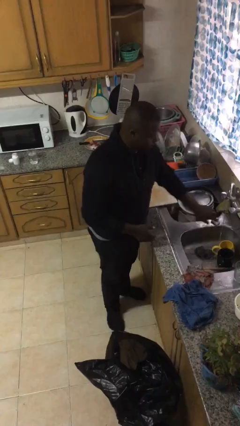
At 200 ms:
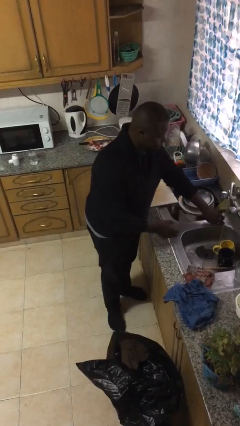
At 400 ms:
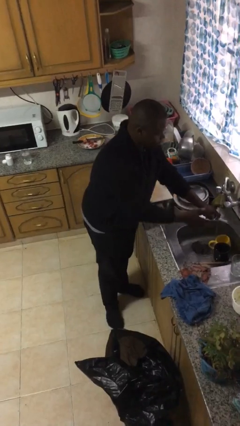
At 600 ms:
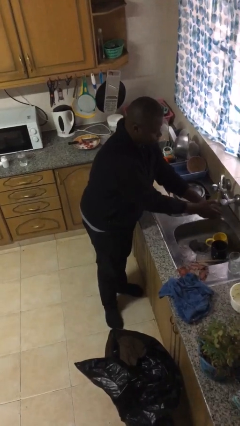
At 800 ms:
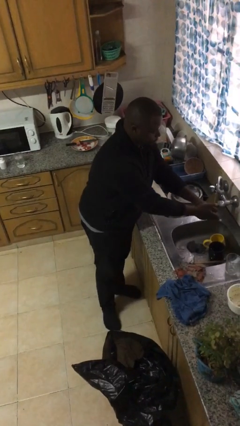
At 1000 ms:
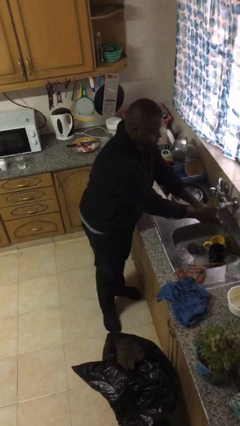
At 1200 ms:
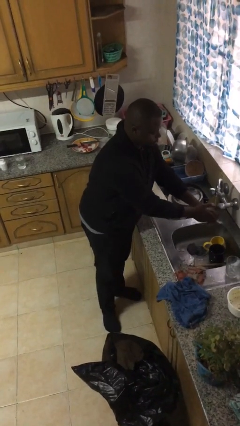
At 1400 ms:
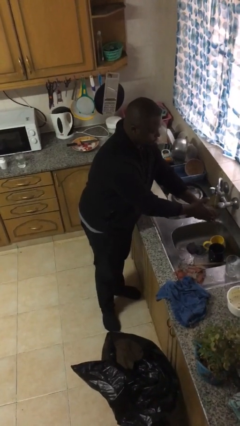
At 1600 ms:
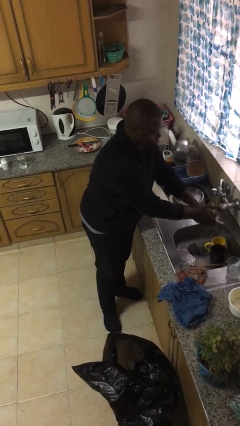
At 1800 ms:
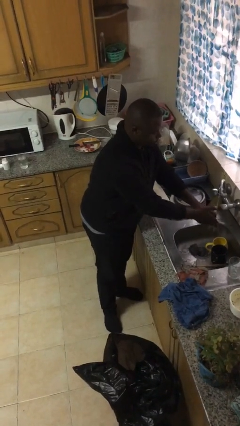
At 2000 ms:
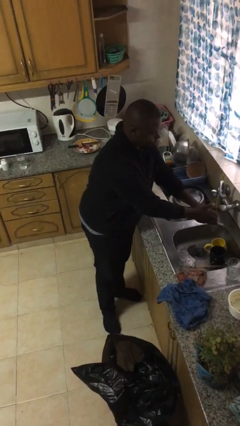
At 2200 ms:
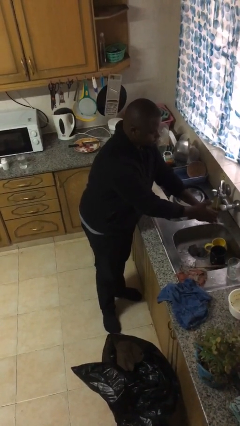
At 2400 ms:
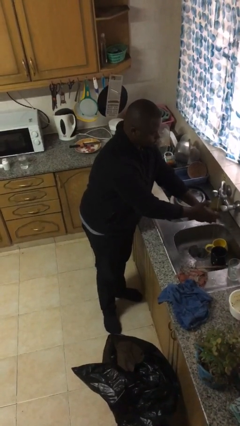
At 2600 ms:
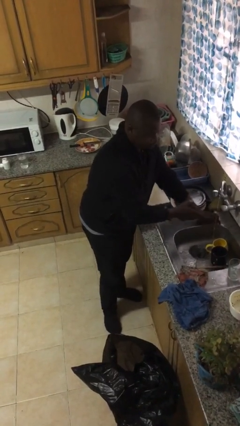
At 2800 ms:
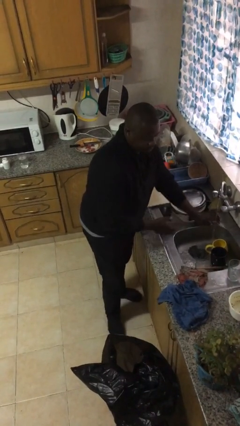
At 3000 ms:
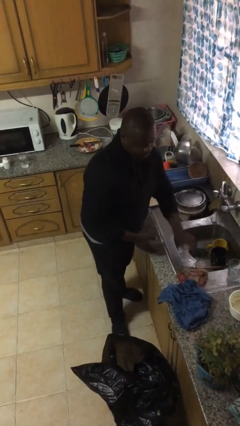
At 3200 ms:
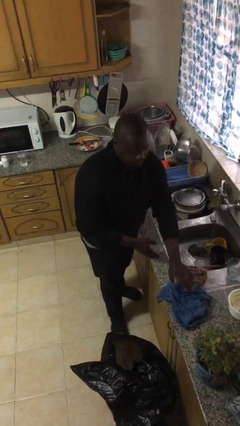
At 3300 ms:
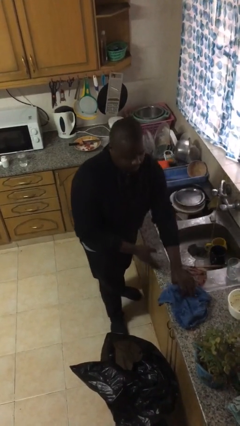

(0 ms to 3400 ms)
person washes hands

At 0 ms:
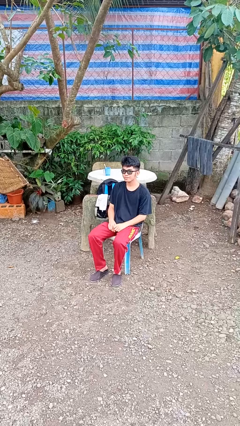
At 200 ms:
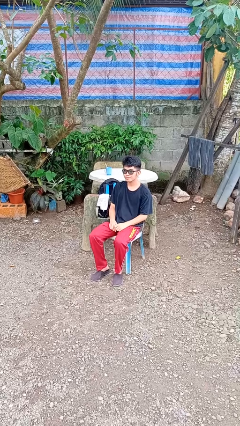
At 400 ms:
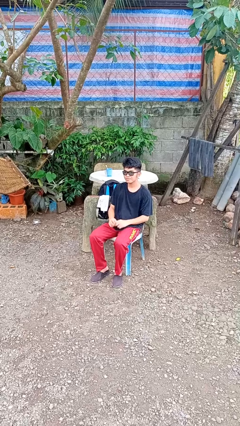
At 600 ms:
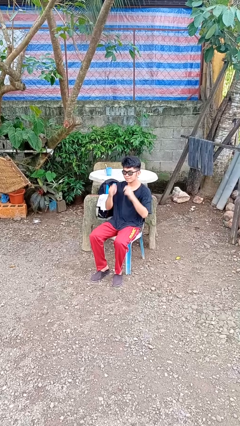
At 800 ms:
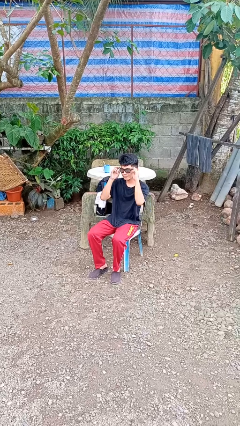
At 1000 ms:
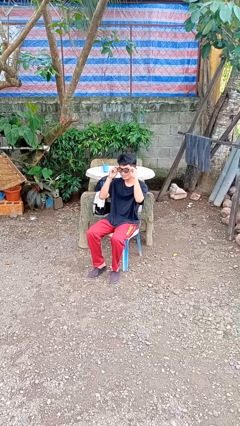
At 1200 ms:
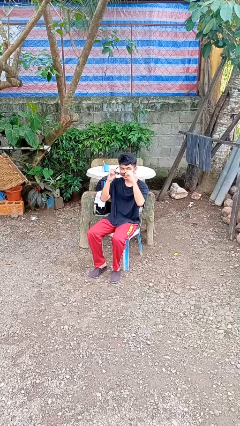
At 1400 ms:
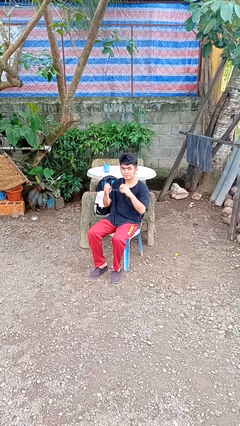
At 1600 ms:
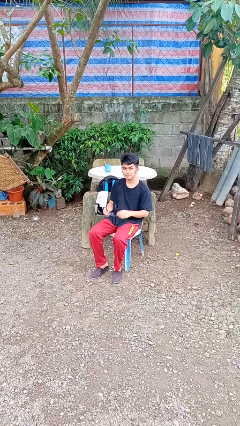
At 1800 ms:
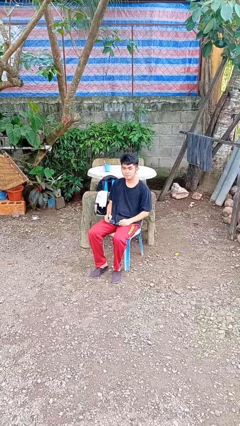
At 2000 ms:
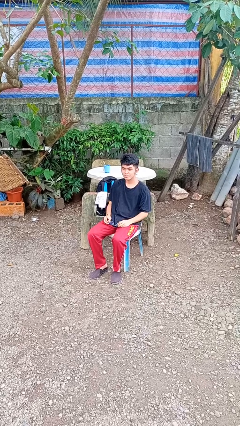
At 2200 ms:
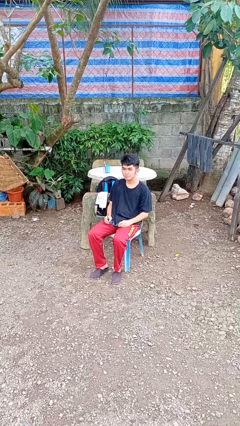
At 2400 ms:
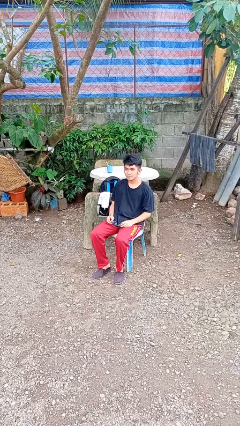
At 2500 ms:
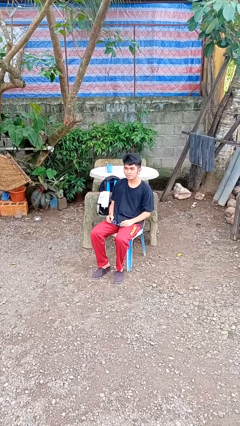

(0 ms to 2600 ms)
person takes off sunglasses

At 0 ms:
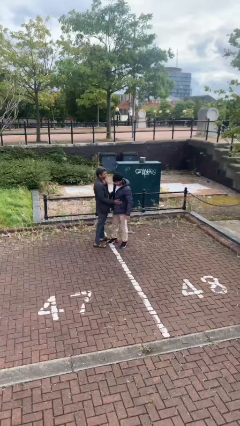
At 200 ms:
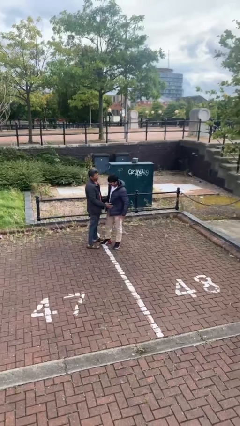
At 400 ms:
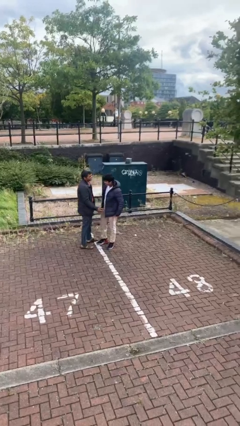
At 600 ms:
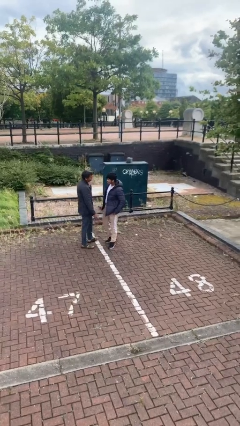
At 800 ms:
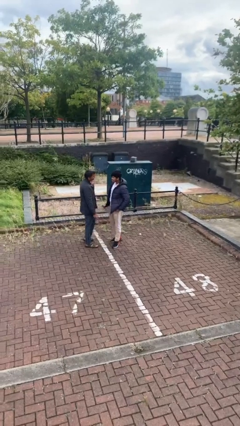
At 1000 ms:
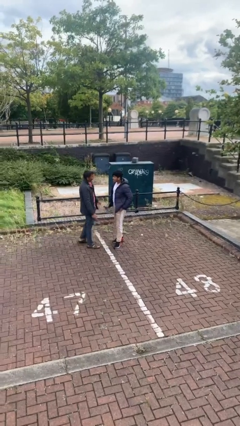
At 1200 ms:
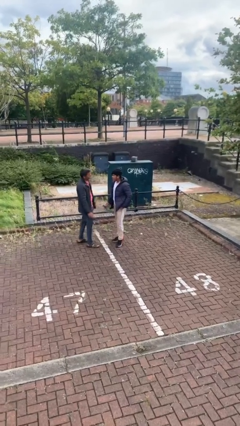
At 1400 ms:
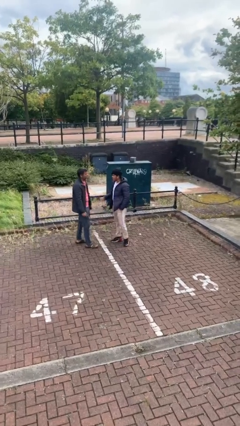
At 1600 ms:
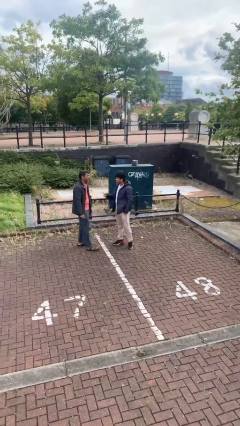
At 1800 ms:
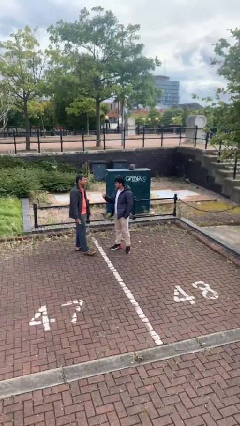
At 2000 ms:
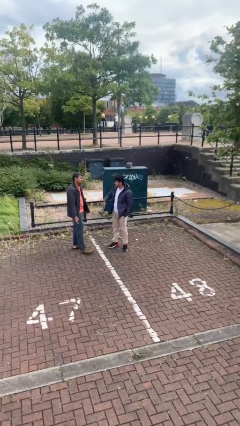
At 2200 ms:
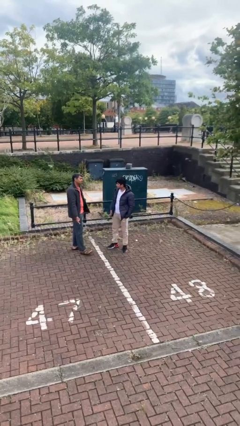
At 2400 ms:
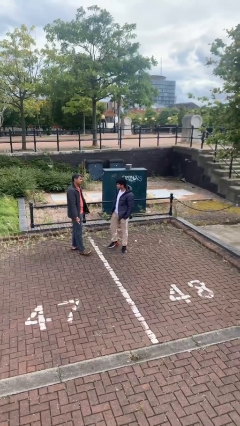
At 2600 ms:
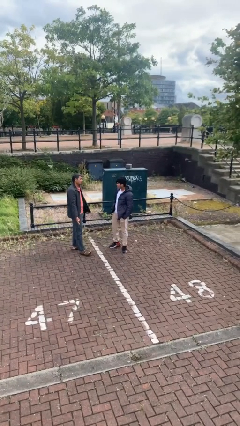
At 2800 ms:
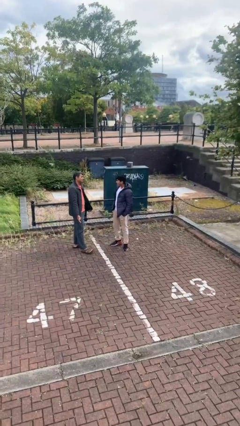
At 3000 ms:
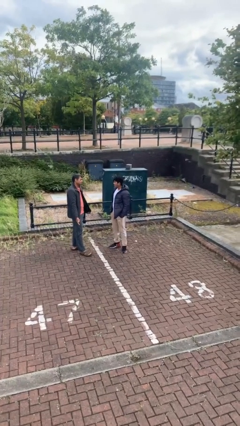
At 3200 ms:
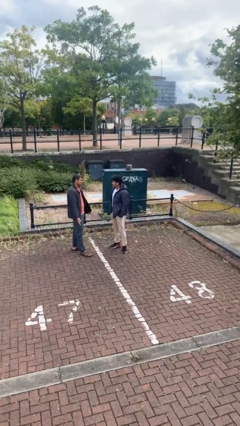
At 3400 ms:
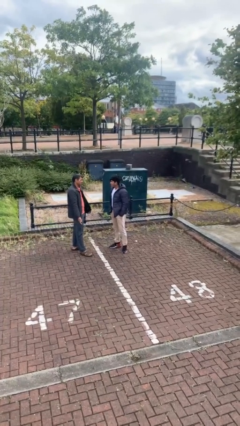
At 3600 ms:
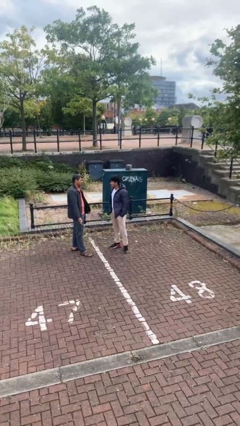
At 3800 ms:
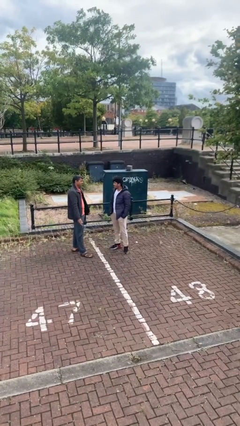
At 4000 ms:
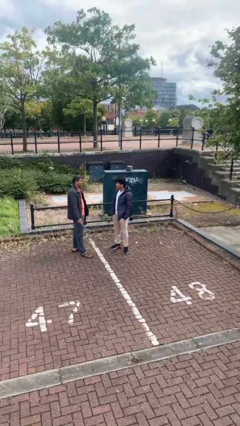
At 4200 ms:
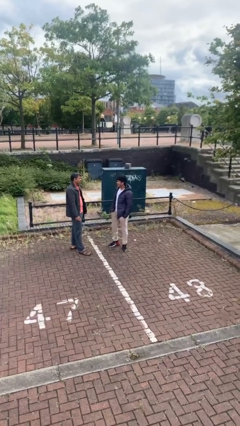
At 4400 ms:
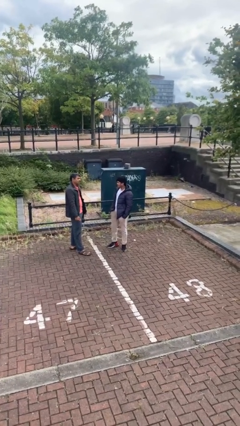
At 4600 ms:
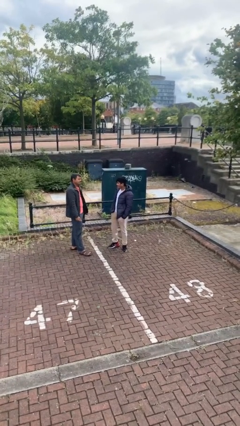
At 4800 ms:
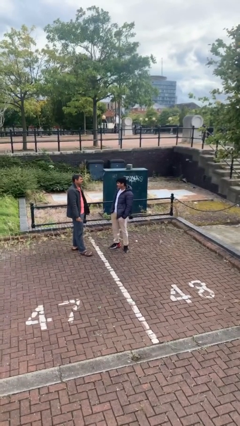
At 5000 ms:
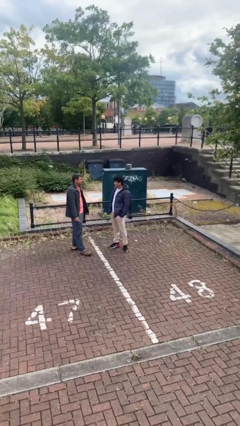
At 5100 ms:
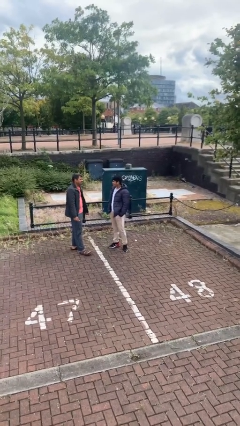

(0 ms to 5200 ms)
person talks to person

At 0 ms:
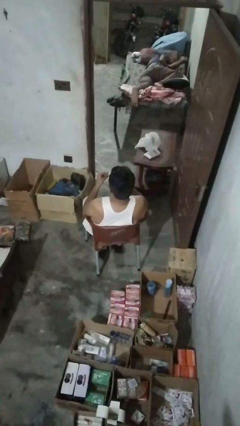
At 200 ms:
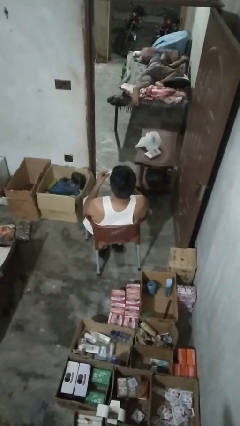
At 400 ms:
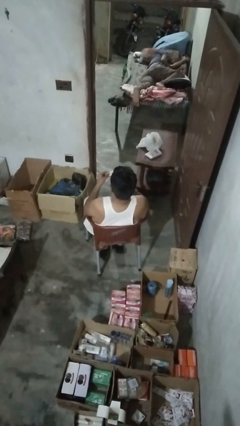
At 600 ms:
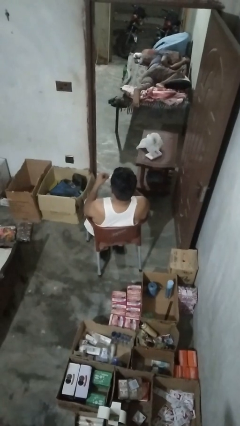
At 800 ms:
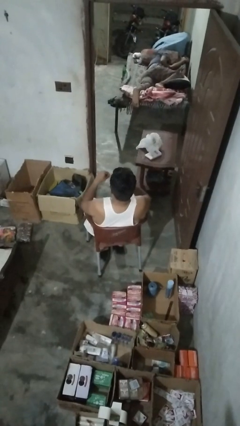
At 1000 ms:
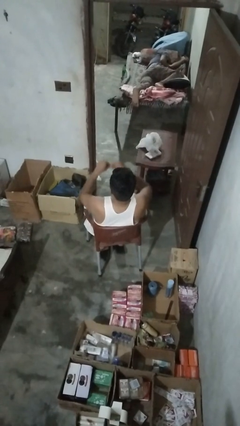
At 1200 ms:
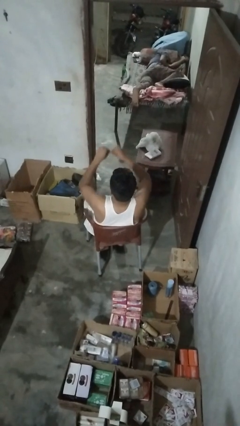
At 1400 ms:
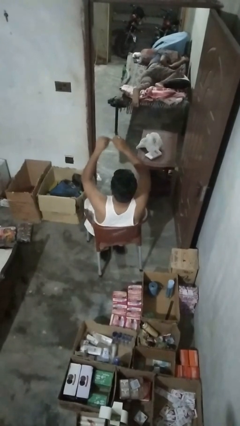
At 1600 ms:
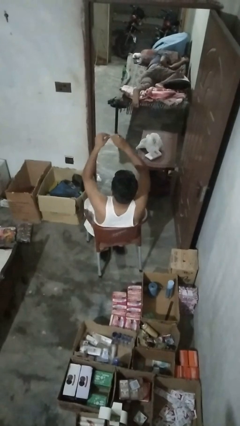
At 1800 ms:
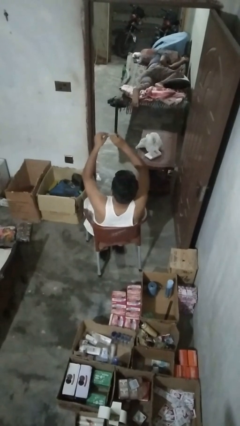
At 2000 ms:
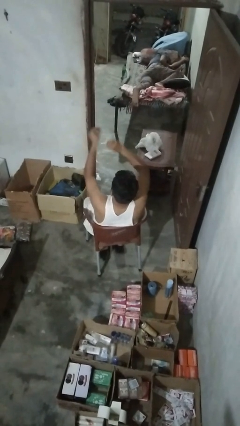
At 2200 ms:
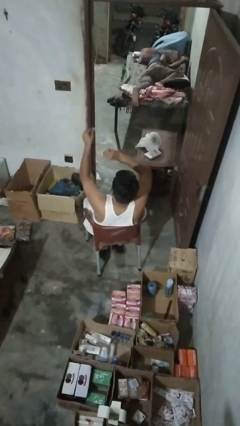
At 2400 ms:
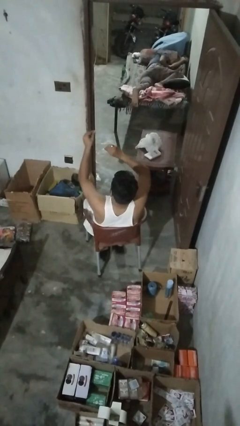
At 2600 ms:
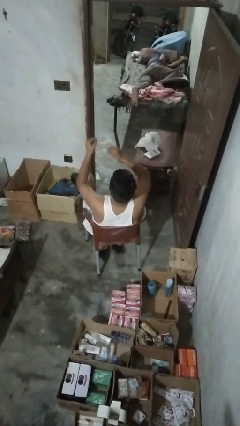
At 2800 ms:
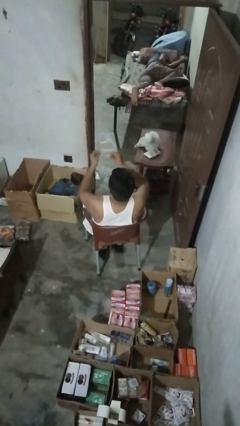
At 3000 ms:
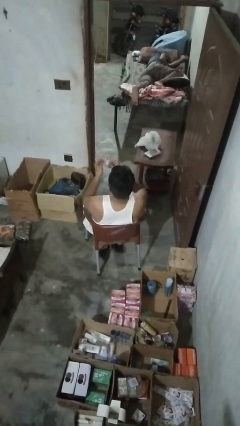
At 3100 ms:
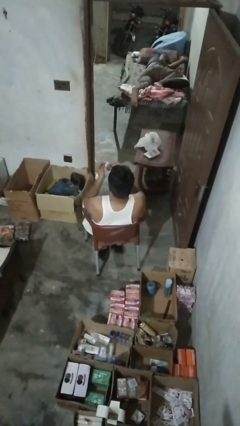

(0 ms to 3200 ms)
person tears paper

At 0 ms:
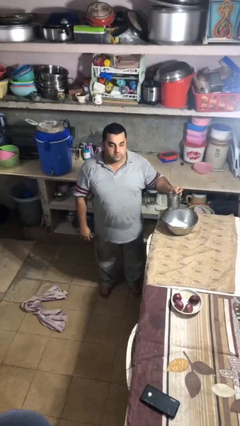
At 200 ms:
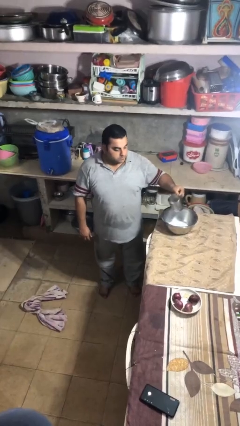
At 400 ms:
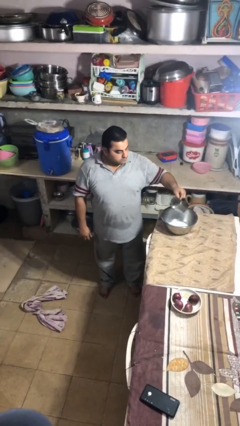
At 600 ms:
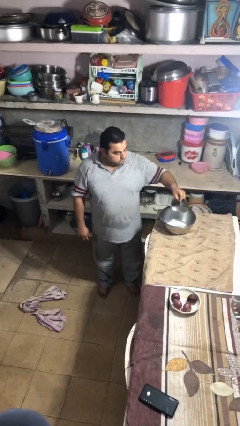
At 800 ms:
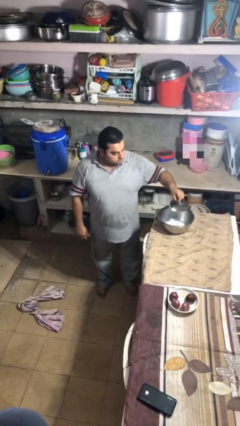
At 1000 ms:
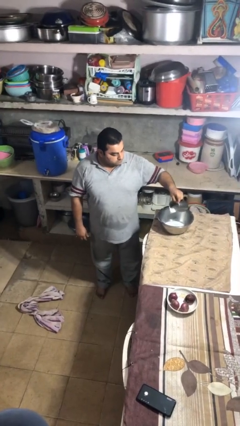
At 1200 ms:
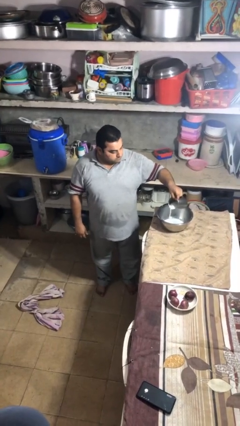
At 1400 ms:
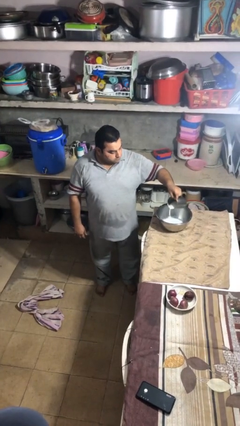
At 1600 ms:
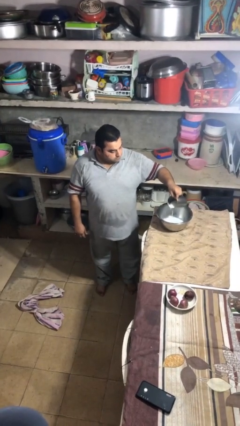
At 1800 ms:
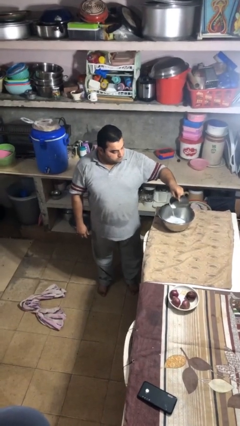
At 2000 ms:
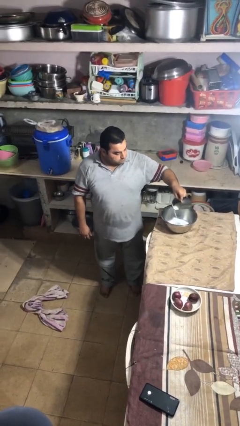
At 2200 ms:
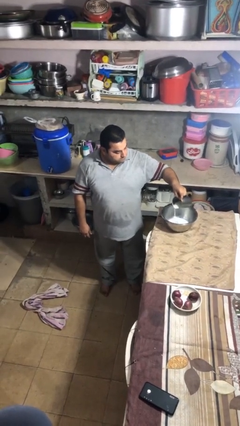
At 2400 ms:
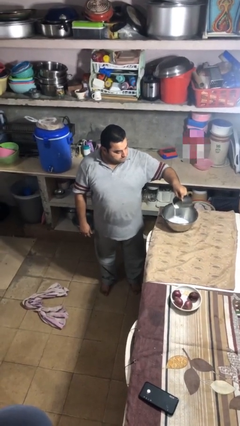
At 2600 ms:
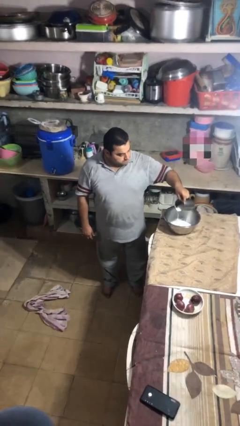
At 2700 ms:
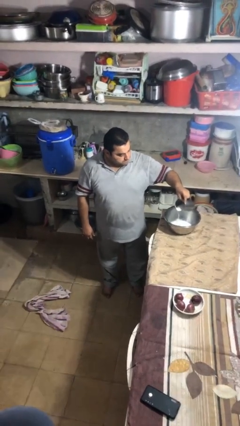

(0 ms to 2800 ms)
person pours into bowl

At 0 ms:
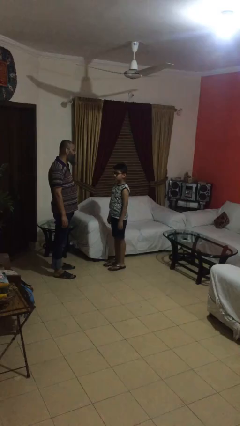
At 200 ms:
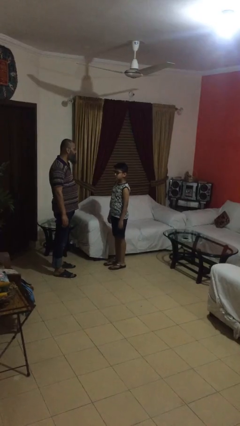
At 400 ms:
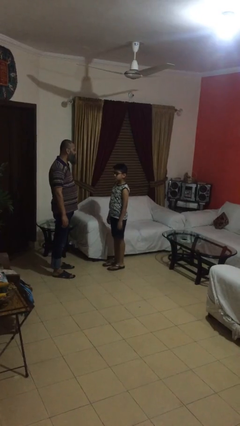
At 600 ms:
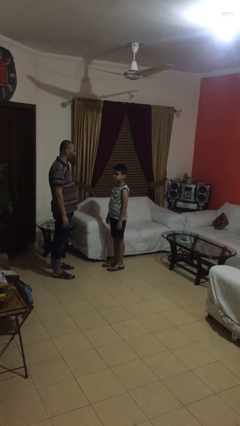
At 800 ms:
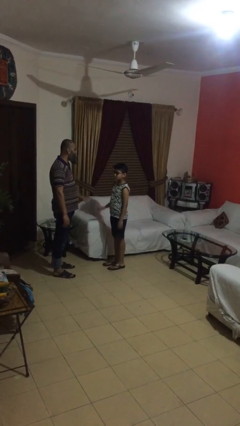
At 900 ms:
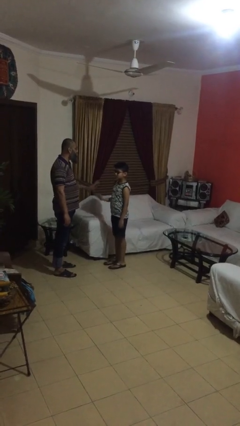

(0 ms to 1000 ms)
person highfives hand
